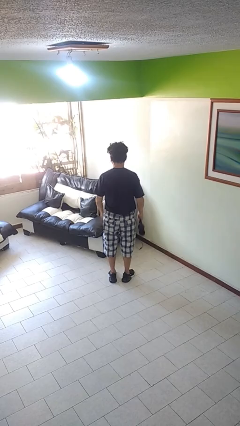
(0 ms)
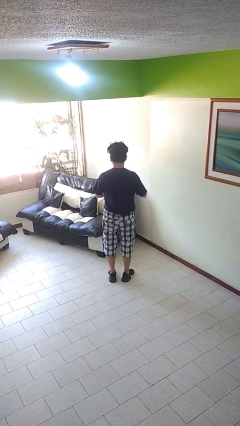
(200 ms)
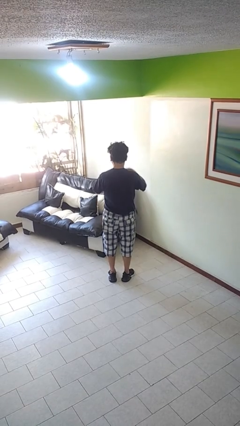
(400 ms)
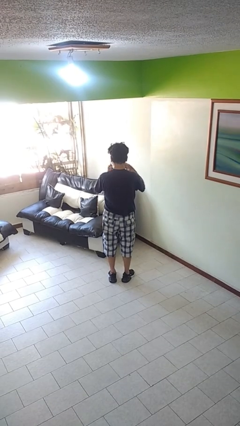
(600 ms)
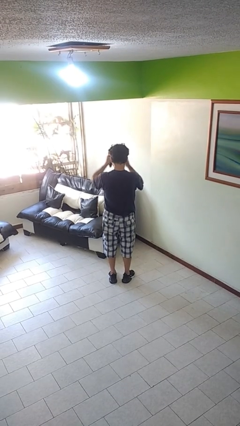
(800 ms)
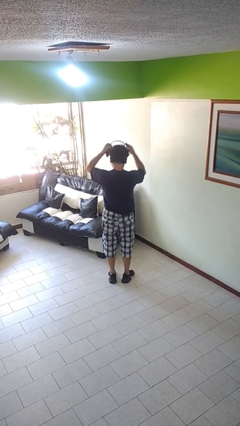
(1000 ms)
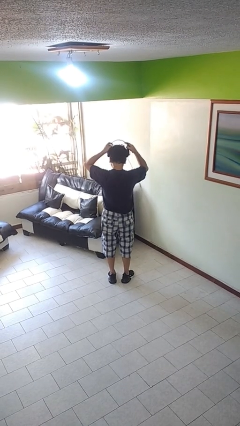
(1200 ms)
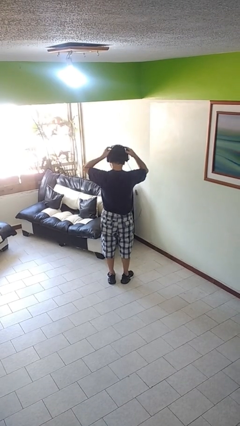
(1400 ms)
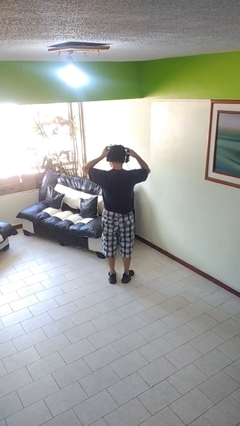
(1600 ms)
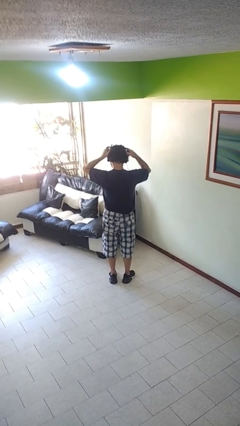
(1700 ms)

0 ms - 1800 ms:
person puts on headphones

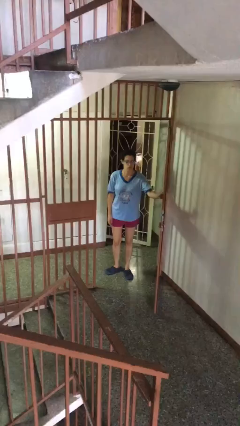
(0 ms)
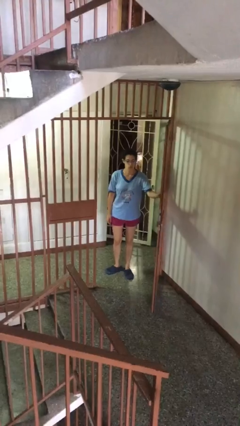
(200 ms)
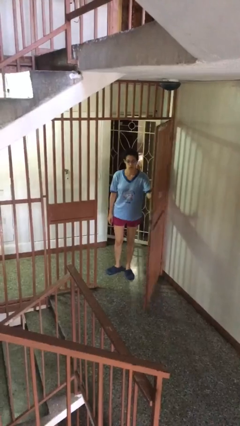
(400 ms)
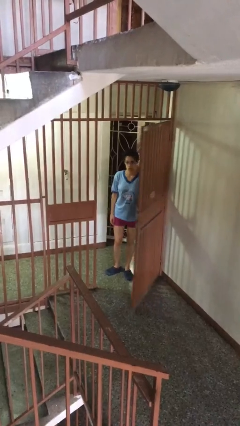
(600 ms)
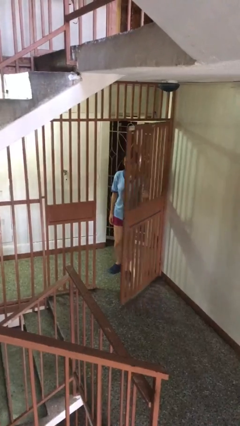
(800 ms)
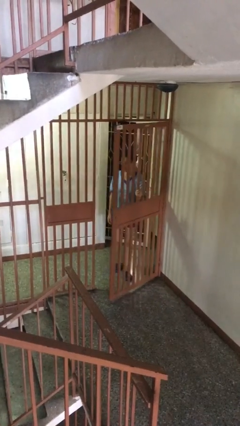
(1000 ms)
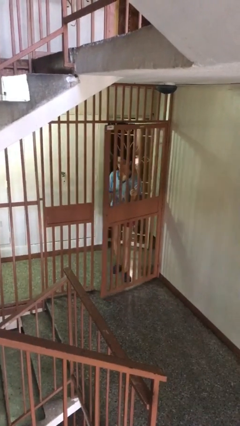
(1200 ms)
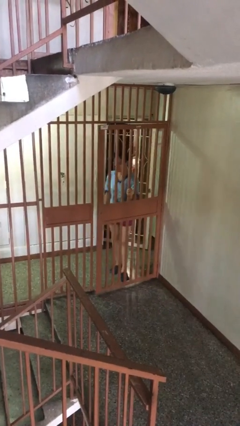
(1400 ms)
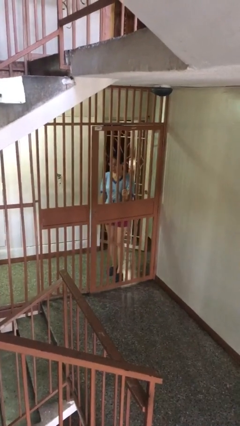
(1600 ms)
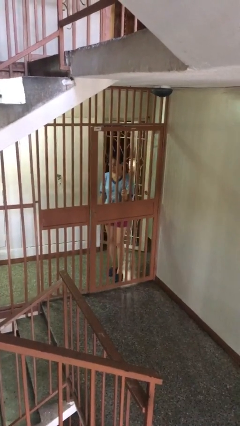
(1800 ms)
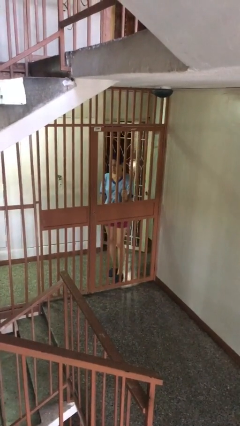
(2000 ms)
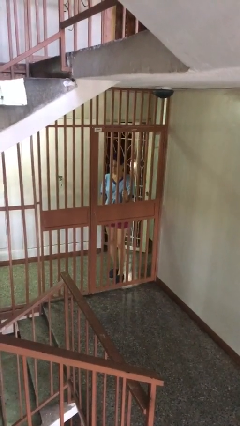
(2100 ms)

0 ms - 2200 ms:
person closes facility door

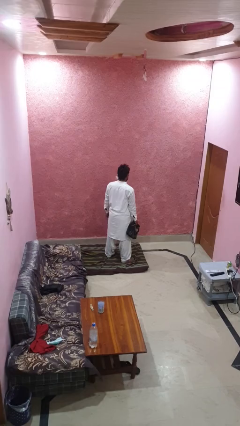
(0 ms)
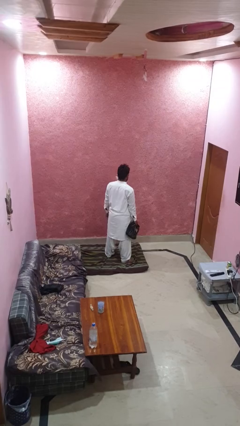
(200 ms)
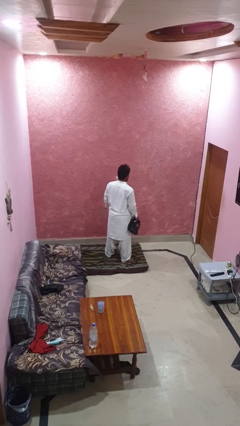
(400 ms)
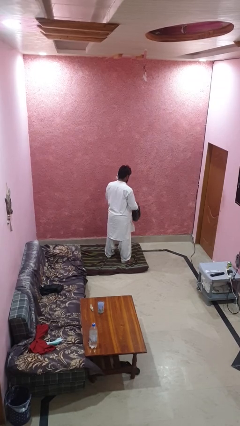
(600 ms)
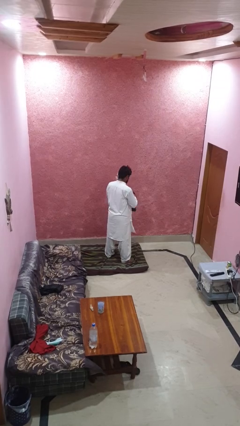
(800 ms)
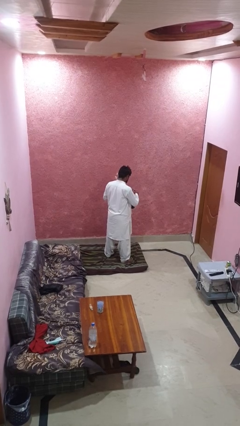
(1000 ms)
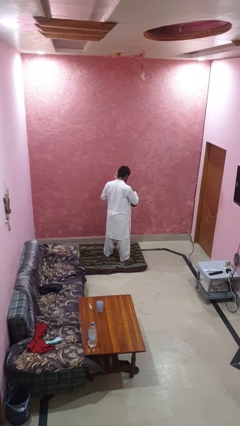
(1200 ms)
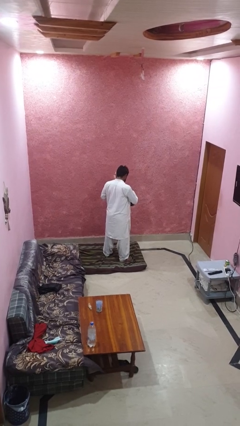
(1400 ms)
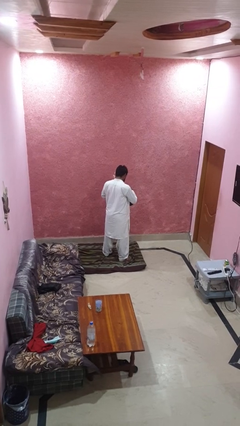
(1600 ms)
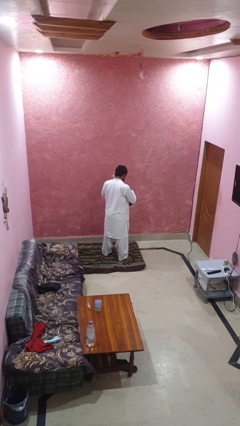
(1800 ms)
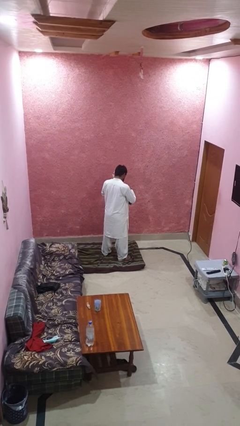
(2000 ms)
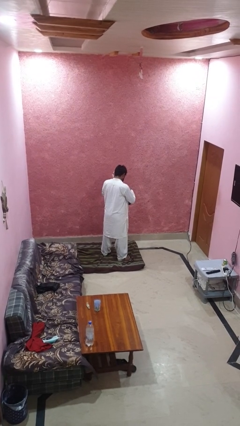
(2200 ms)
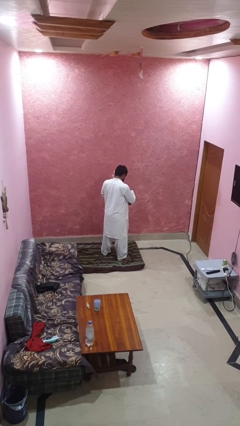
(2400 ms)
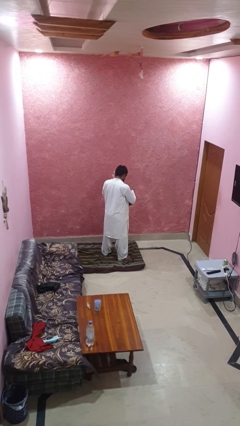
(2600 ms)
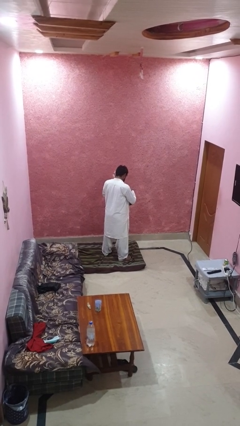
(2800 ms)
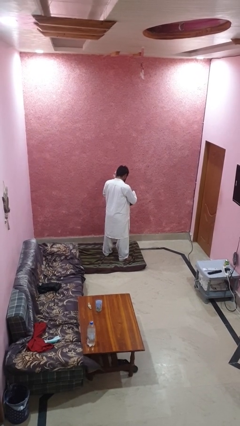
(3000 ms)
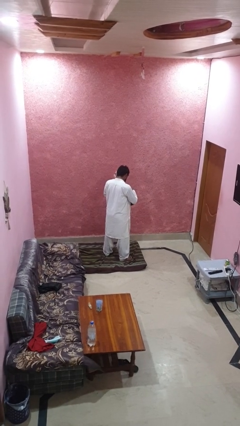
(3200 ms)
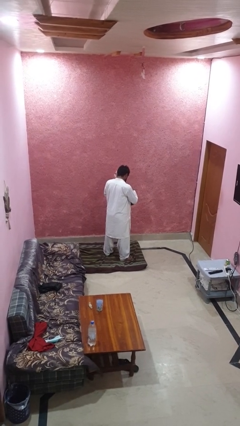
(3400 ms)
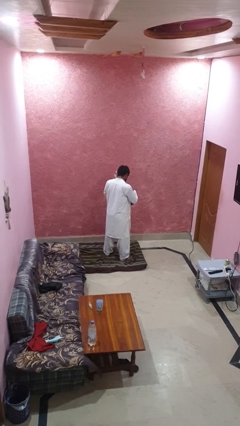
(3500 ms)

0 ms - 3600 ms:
person searches in purse

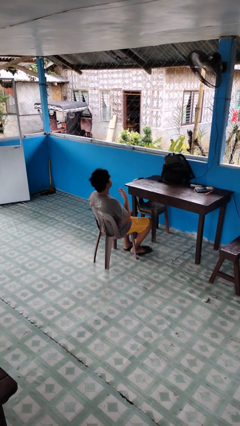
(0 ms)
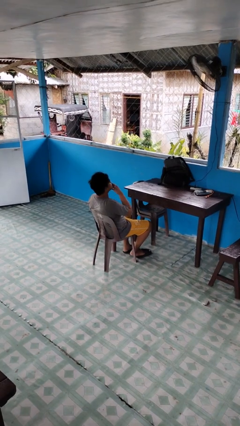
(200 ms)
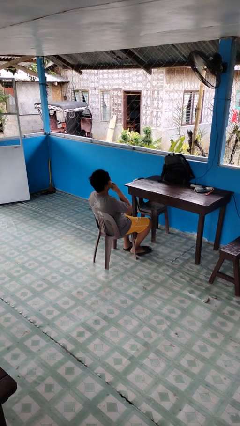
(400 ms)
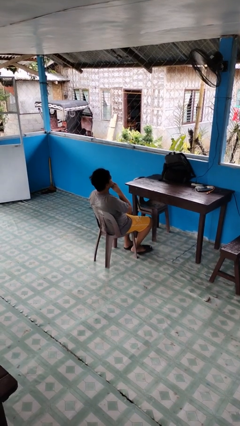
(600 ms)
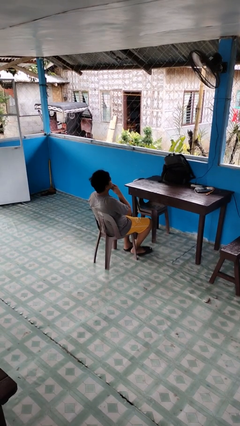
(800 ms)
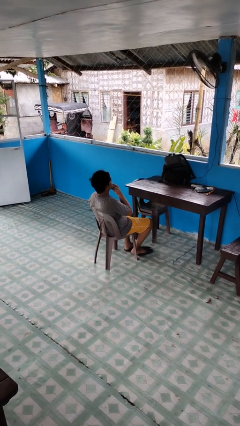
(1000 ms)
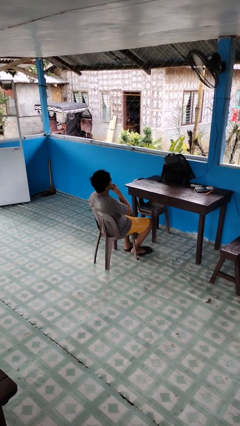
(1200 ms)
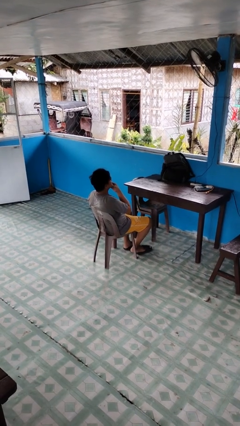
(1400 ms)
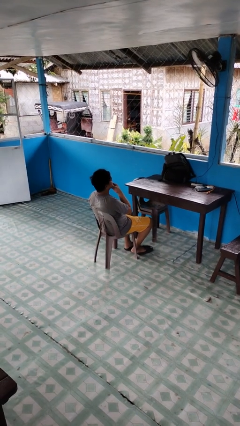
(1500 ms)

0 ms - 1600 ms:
person strokes chin

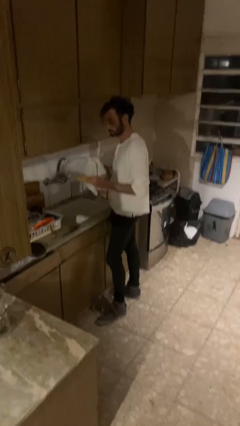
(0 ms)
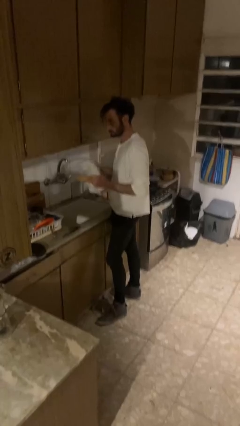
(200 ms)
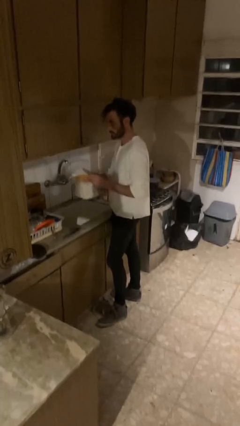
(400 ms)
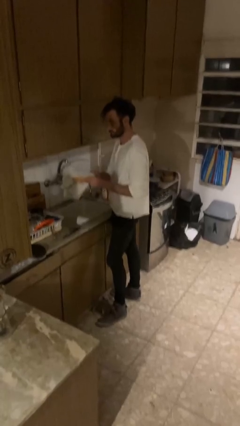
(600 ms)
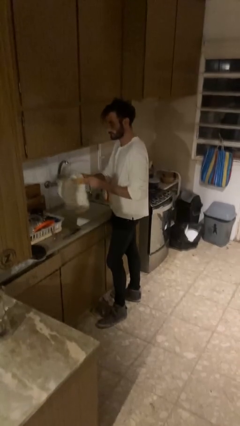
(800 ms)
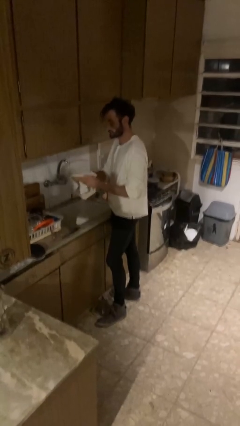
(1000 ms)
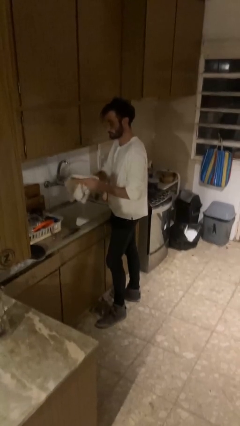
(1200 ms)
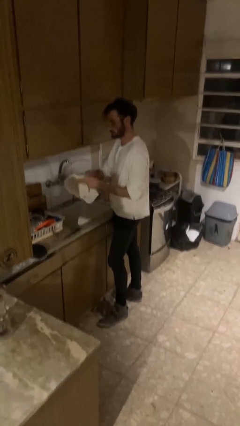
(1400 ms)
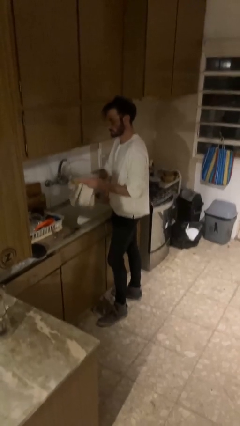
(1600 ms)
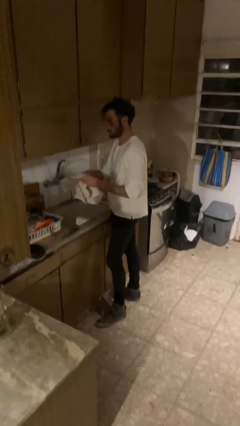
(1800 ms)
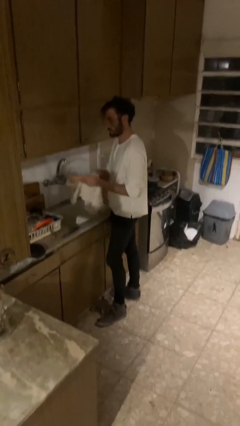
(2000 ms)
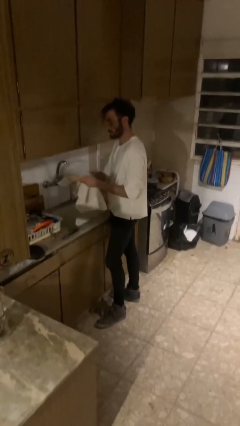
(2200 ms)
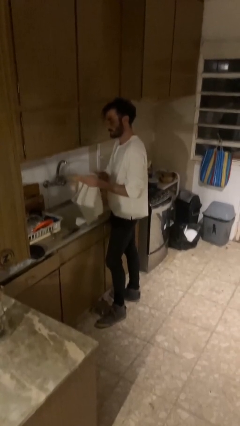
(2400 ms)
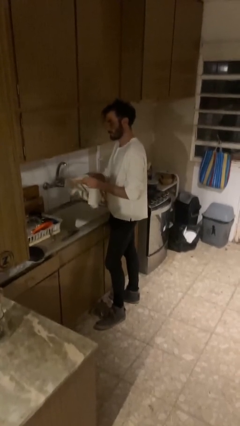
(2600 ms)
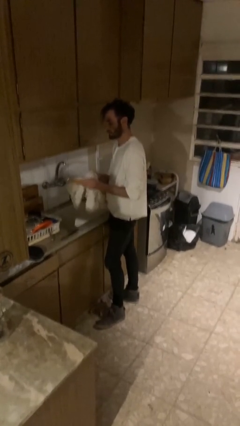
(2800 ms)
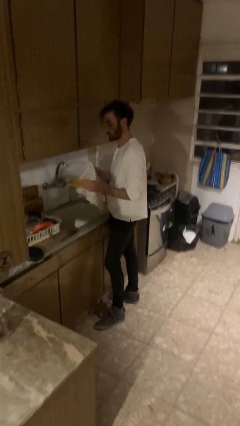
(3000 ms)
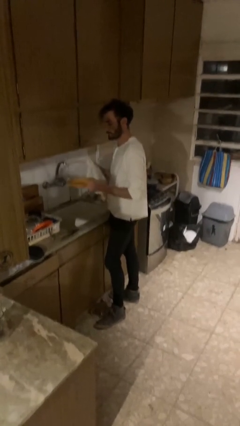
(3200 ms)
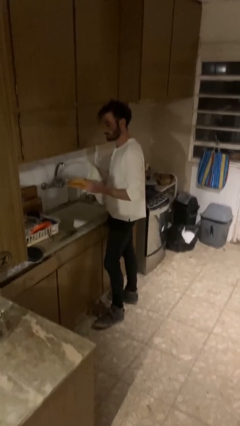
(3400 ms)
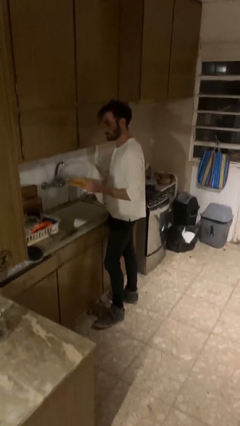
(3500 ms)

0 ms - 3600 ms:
person dries dish

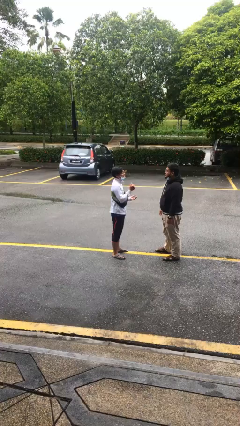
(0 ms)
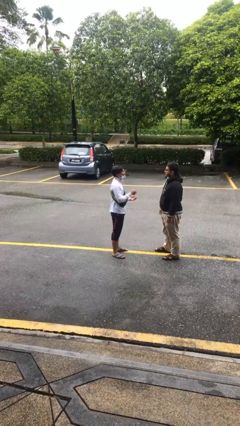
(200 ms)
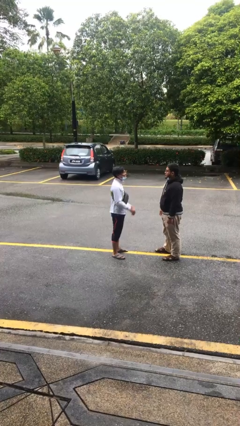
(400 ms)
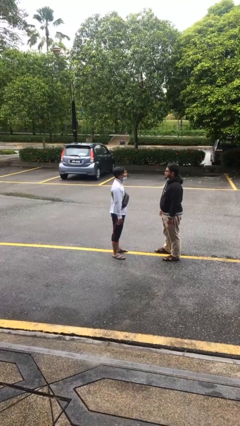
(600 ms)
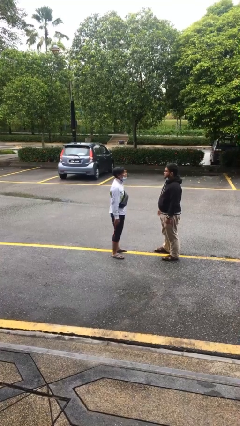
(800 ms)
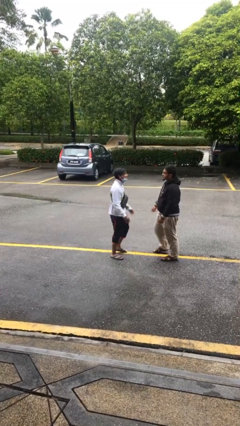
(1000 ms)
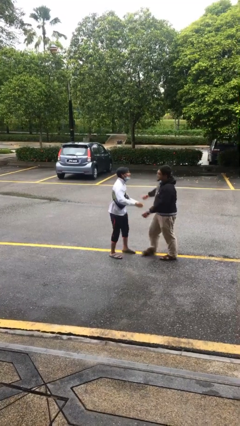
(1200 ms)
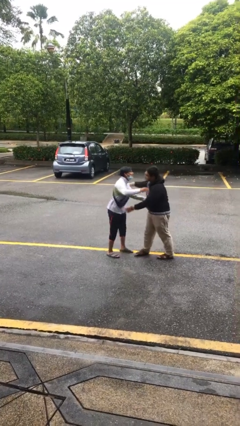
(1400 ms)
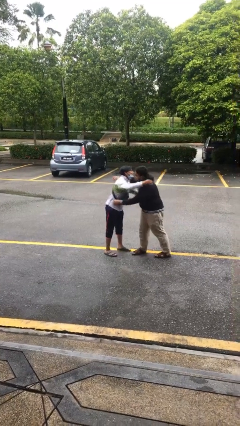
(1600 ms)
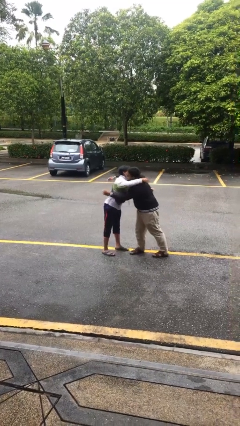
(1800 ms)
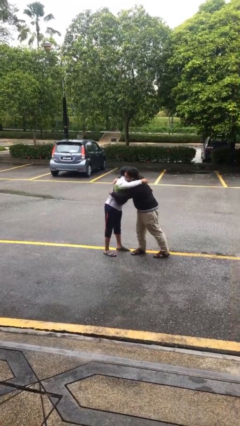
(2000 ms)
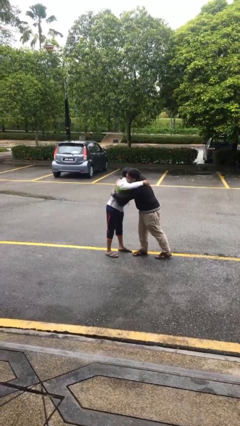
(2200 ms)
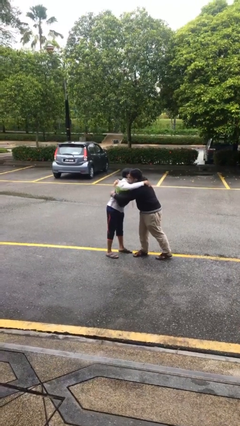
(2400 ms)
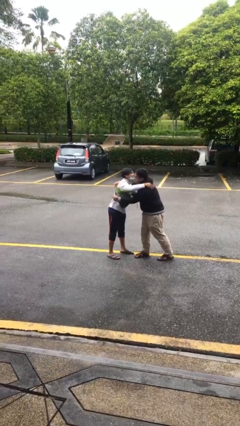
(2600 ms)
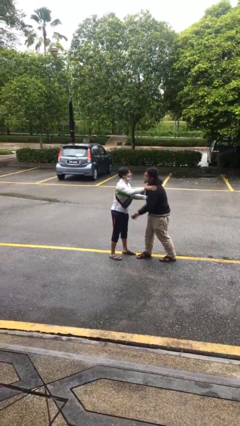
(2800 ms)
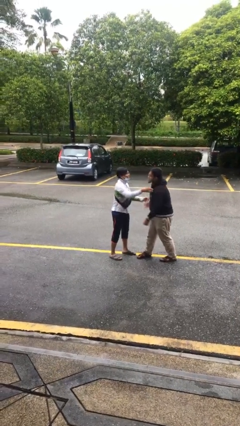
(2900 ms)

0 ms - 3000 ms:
person embraces person

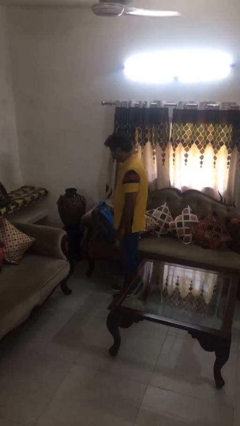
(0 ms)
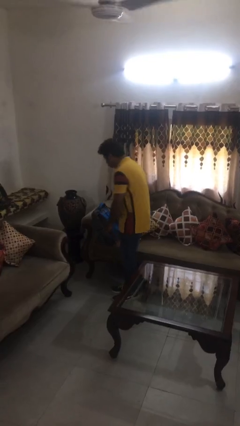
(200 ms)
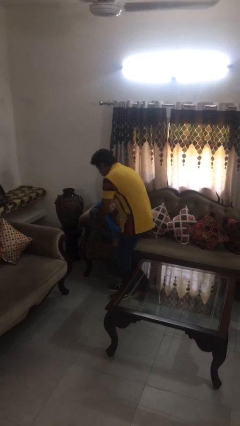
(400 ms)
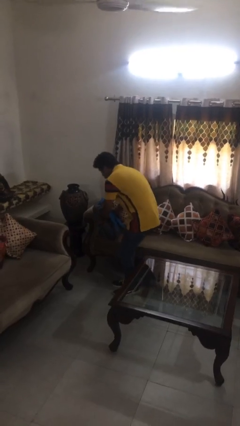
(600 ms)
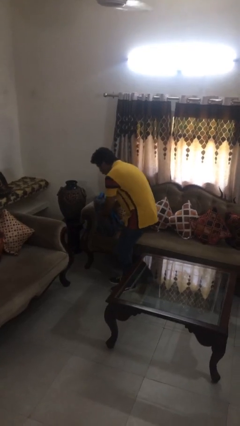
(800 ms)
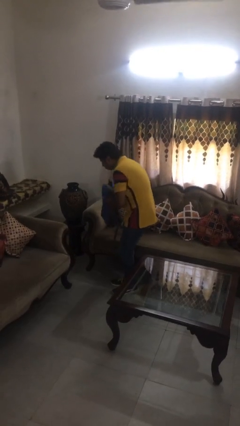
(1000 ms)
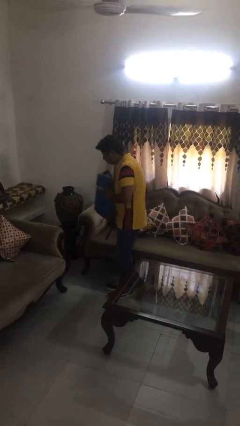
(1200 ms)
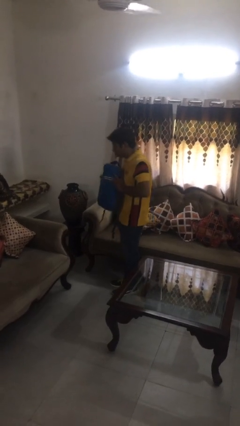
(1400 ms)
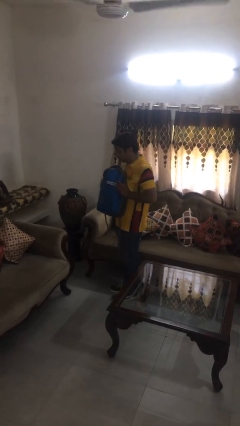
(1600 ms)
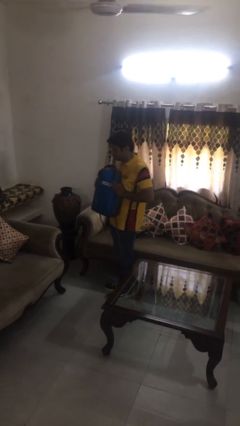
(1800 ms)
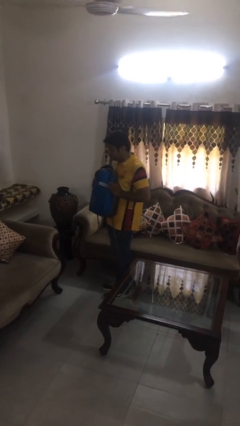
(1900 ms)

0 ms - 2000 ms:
person picks up object from couch
